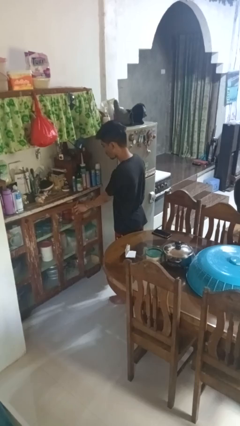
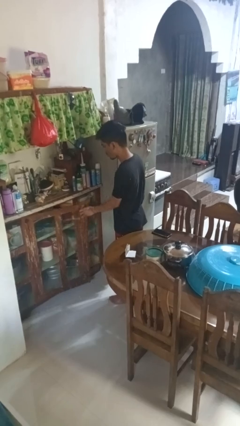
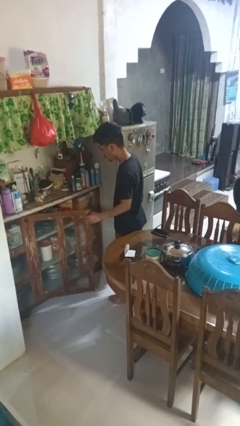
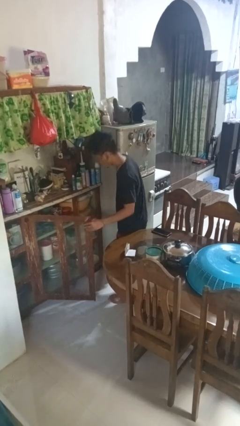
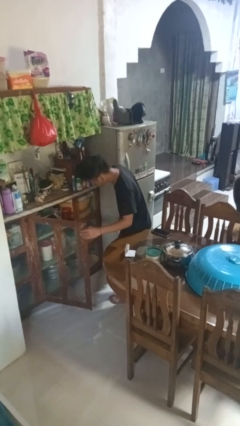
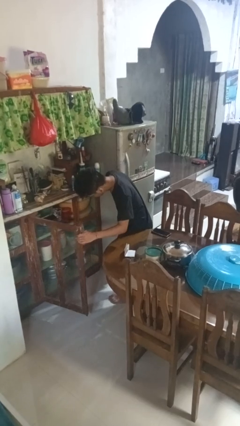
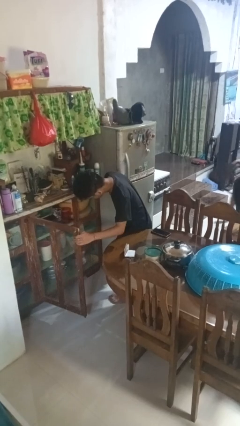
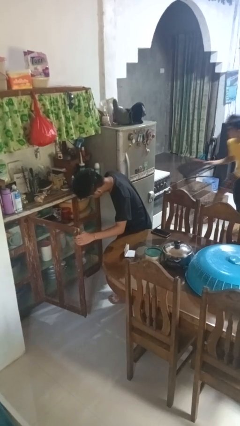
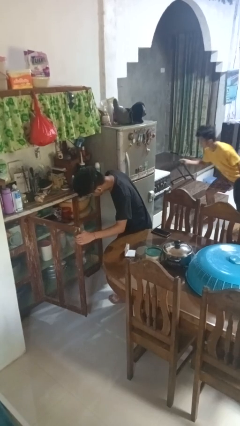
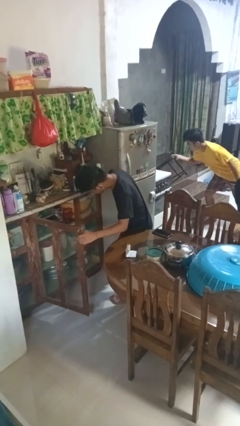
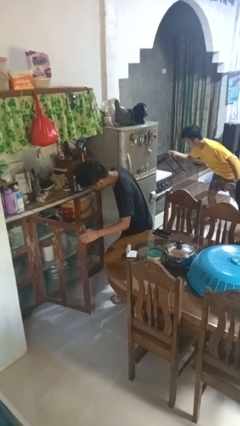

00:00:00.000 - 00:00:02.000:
person opens cabinet

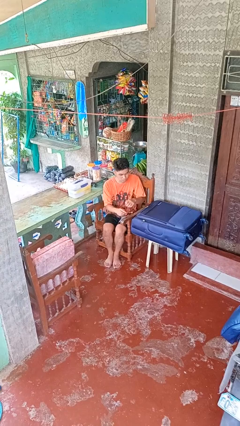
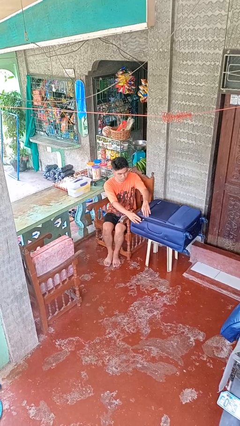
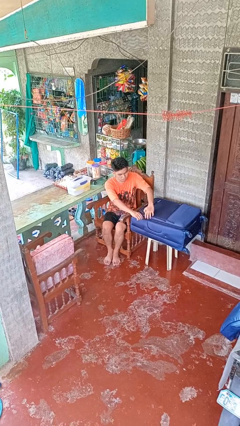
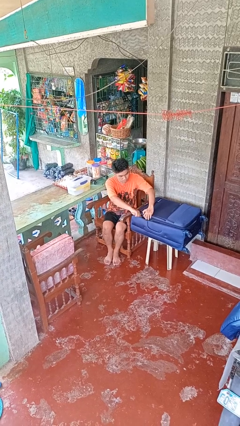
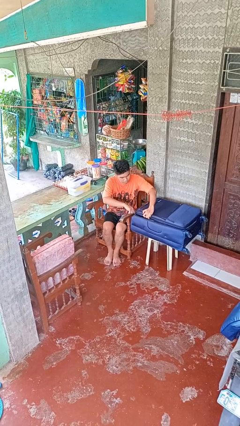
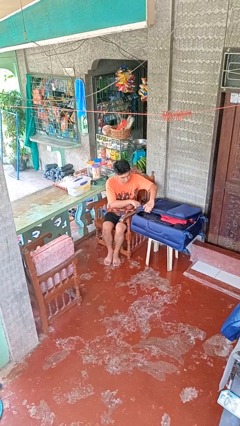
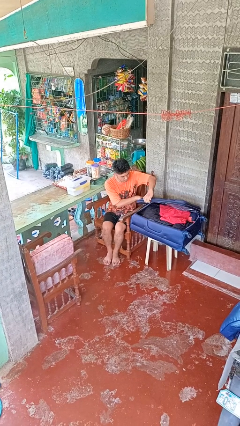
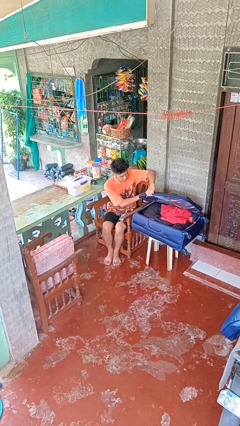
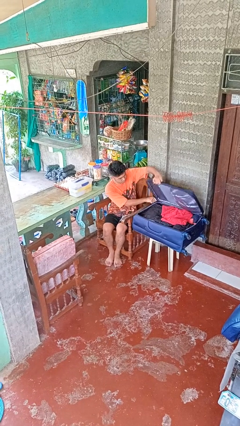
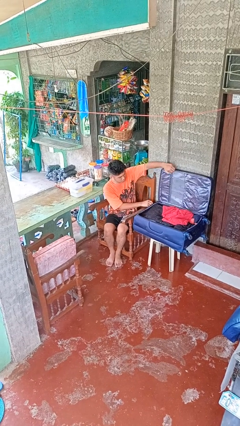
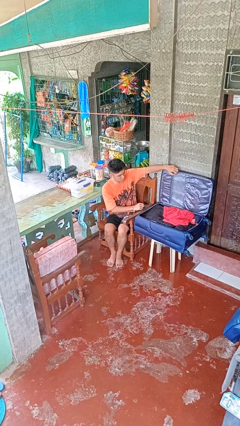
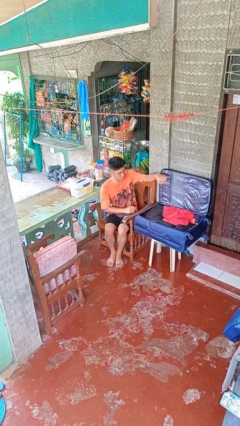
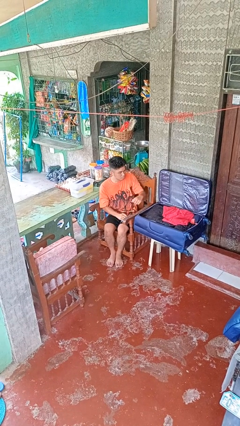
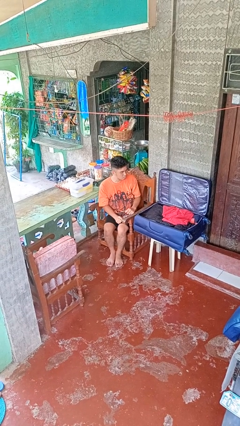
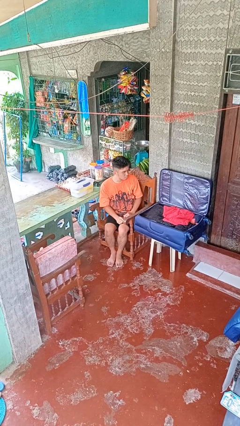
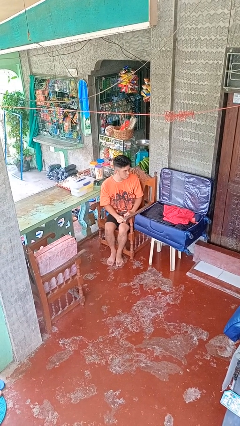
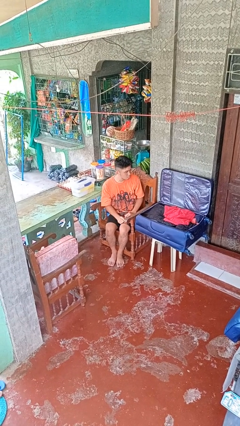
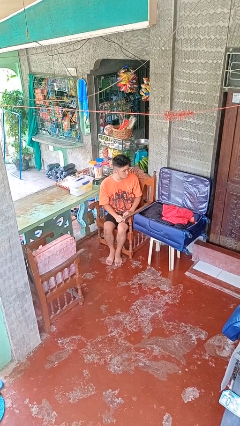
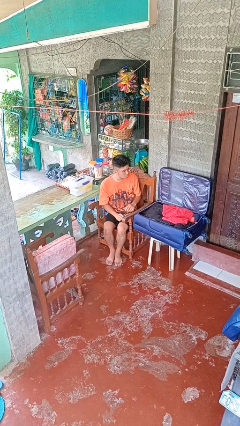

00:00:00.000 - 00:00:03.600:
person opens suitcase

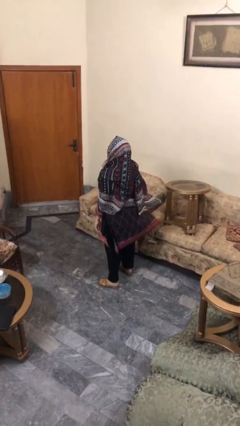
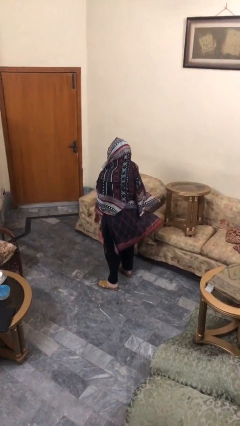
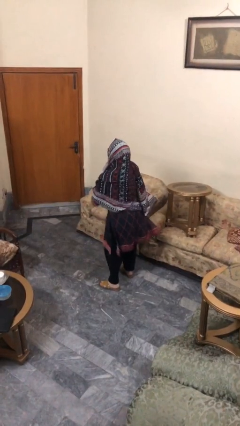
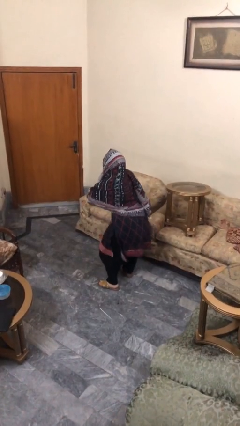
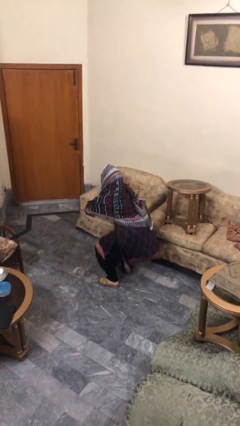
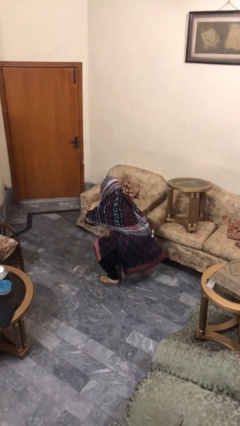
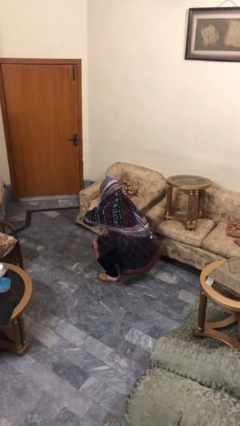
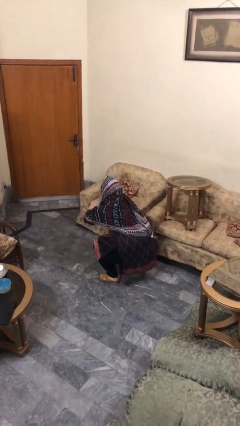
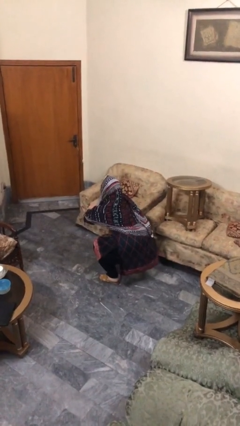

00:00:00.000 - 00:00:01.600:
person squats

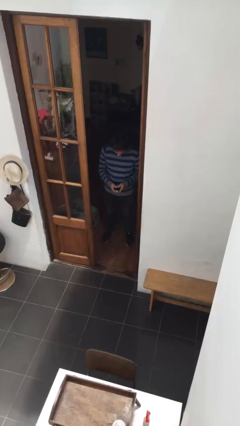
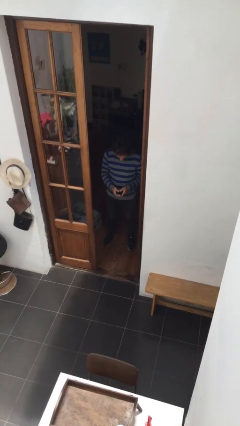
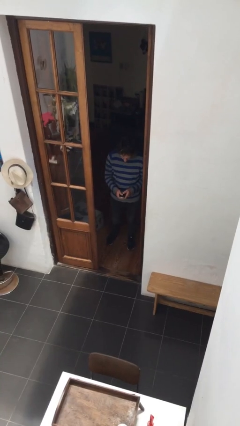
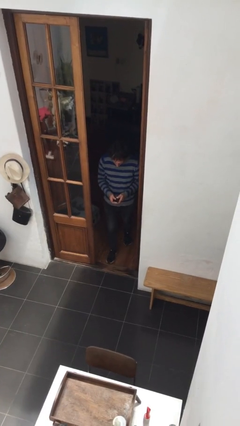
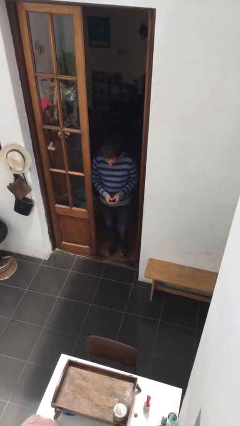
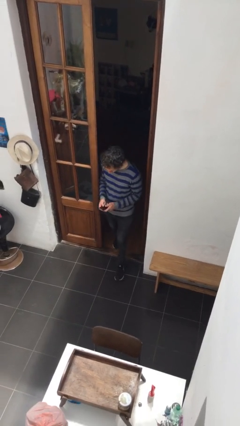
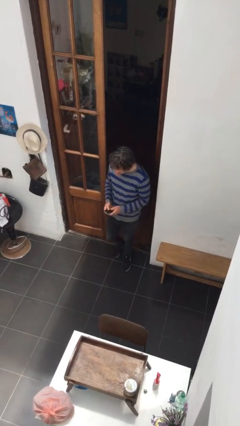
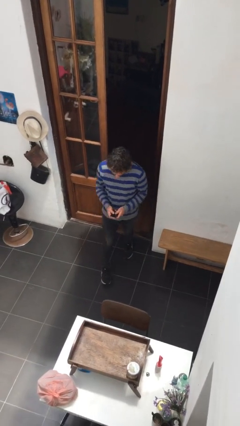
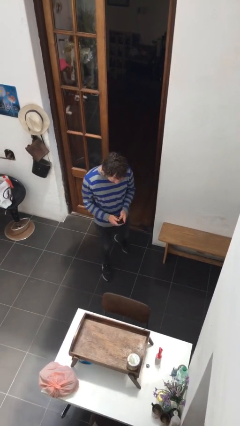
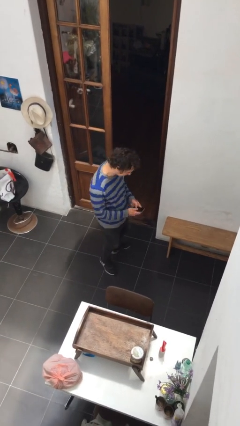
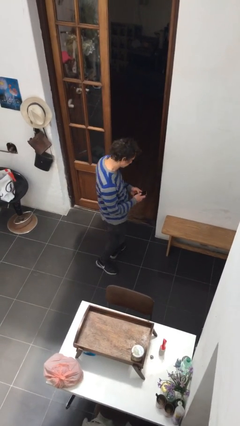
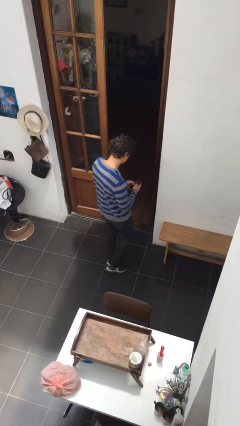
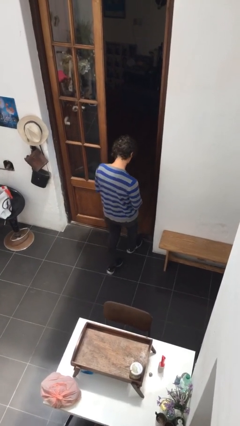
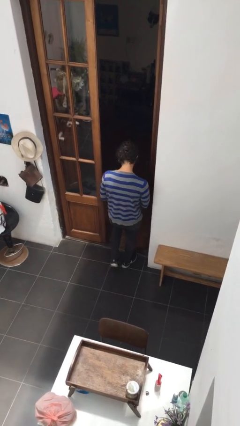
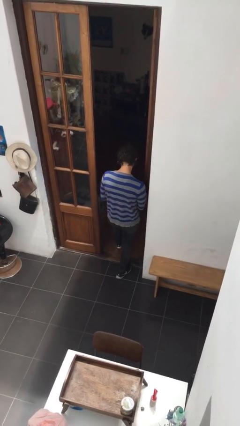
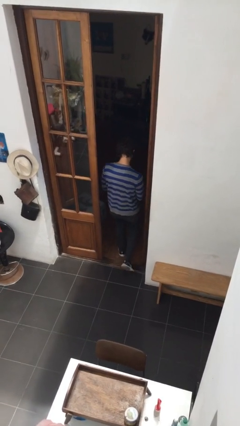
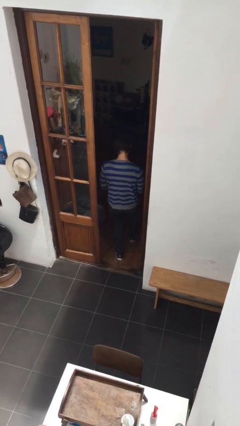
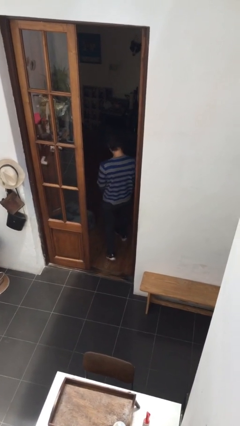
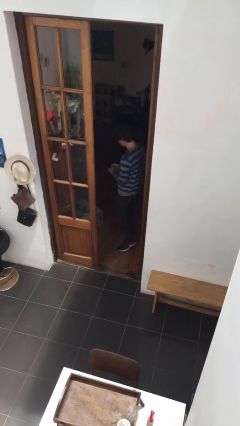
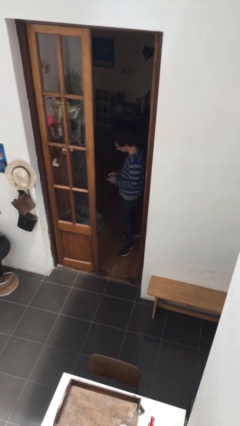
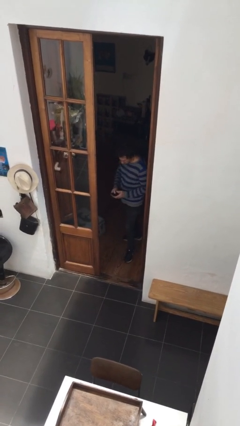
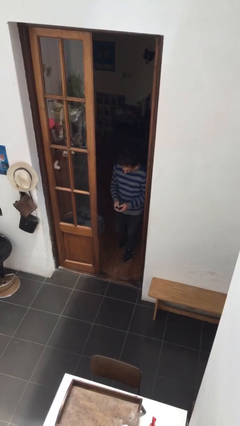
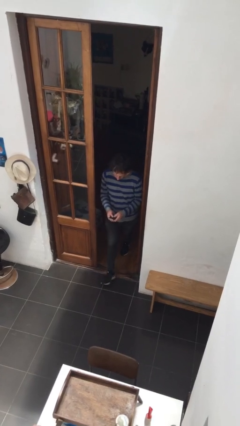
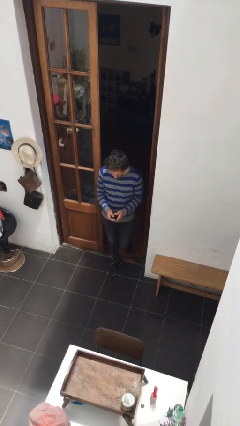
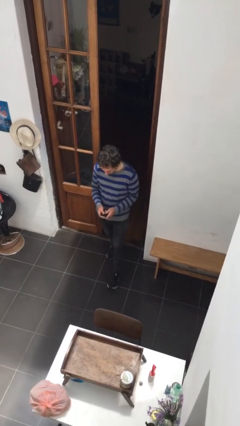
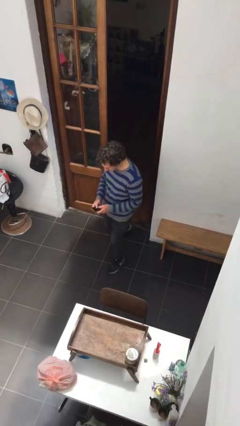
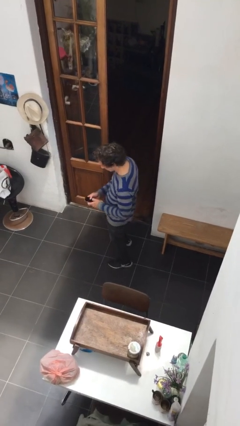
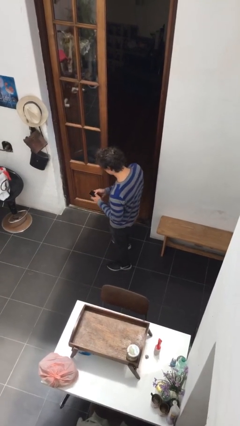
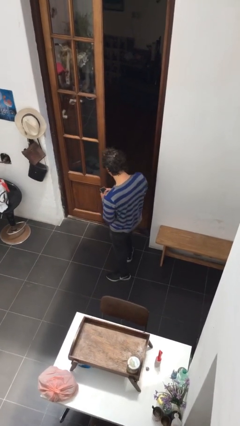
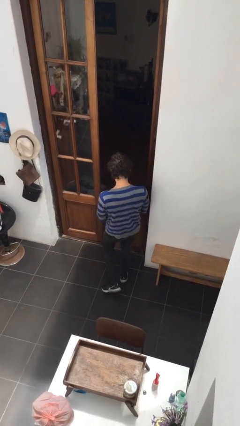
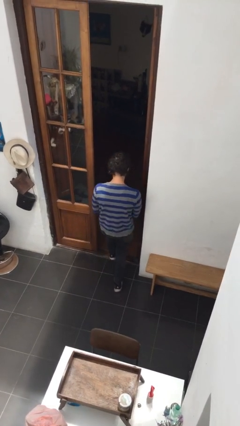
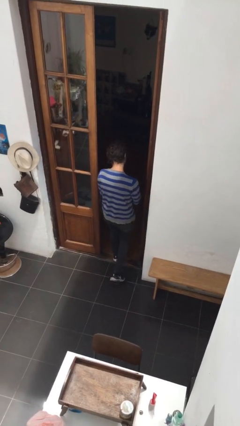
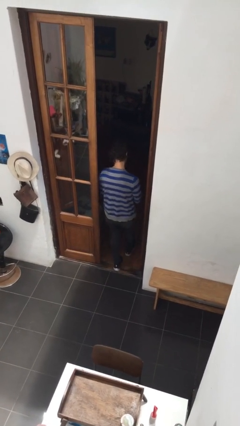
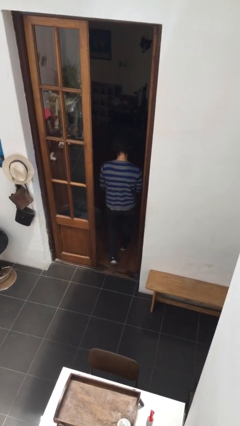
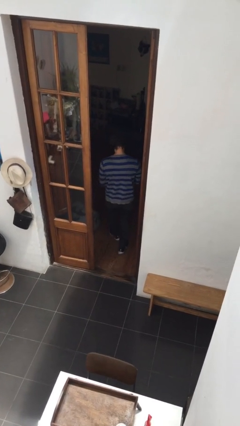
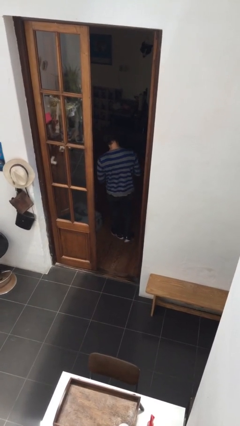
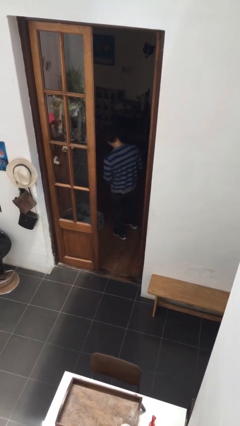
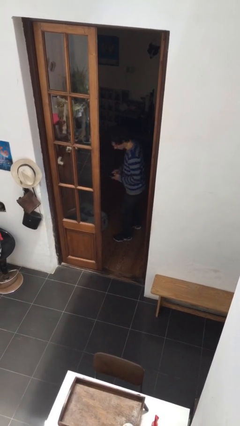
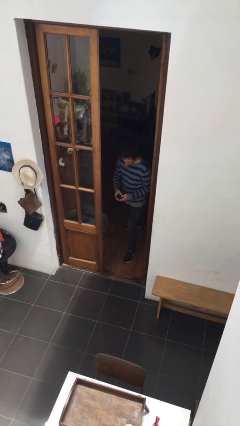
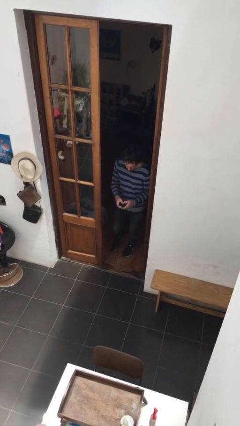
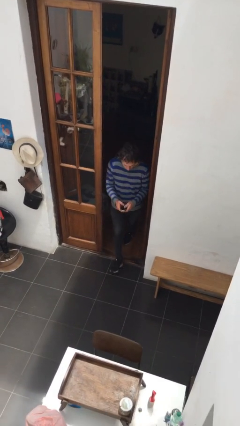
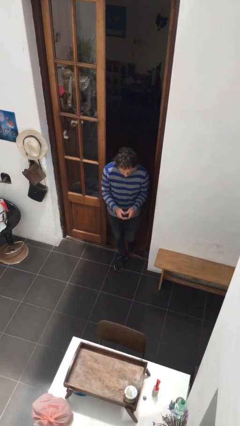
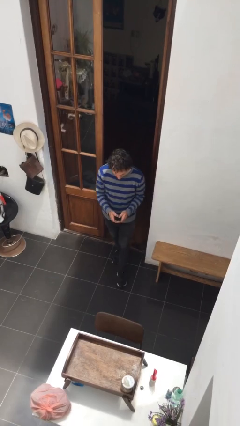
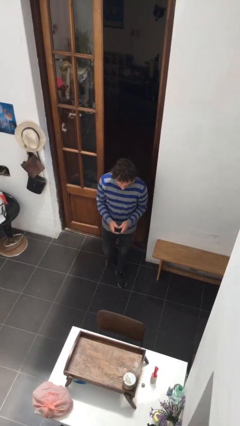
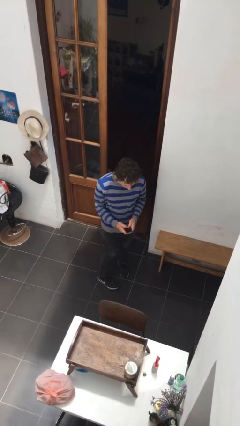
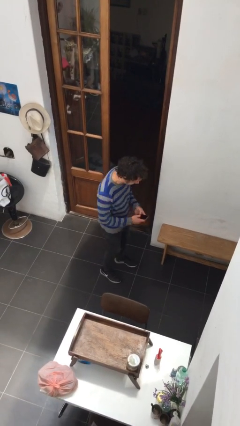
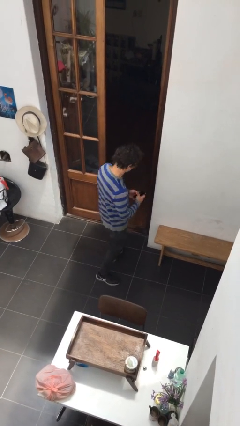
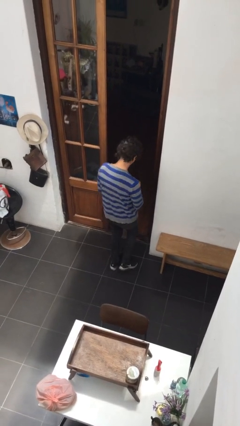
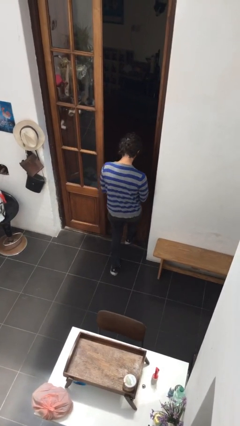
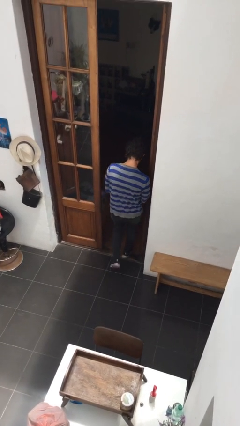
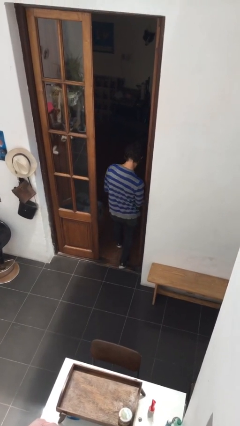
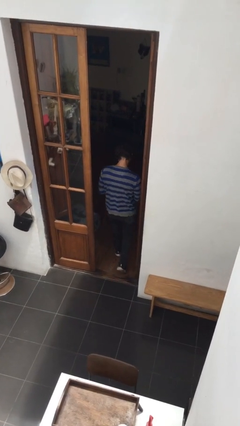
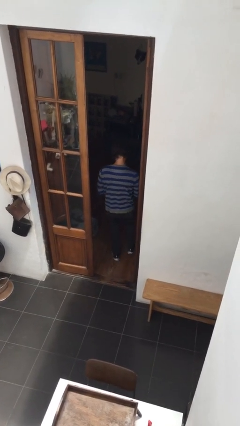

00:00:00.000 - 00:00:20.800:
person texts on phone

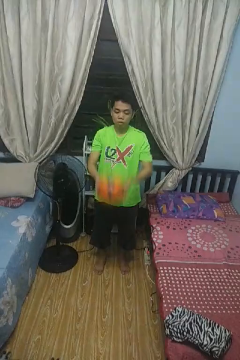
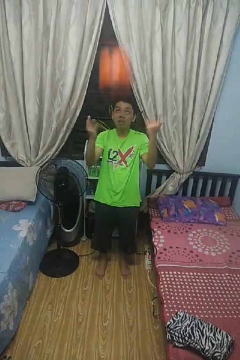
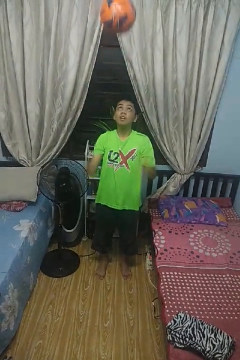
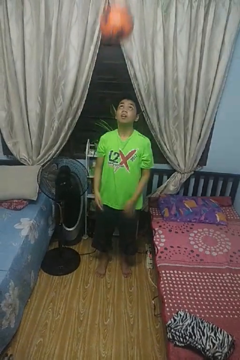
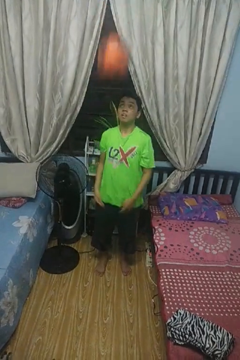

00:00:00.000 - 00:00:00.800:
person drops object
